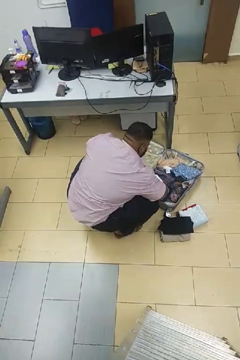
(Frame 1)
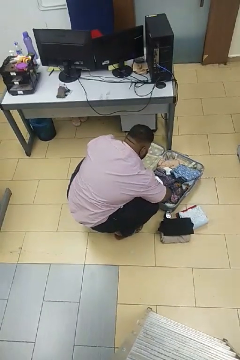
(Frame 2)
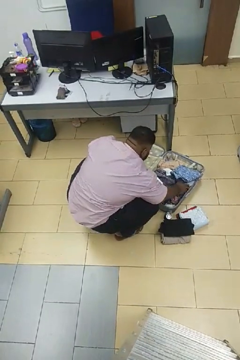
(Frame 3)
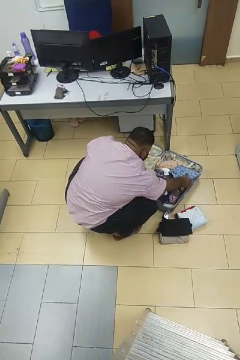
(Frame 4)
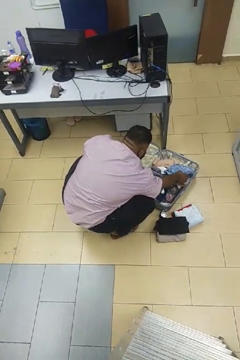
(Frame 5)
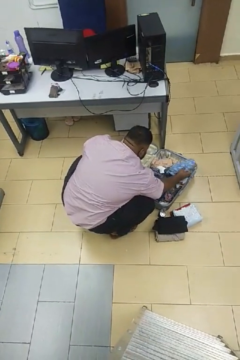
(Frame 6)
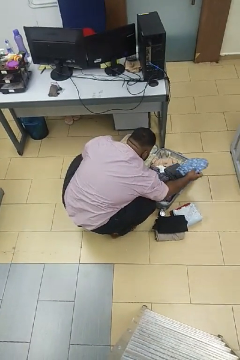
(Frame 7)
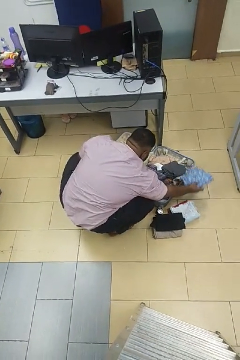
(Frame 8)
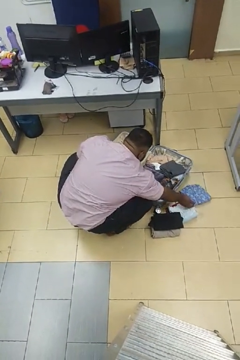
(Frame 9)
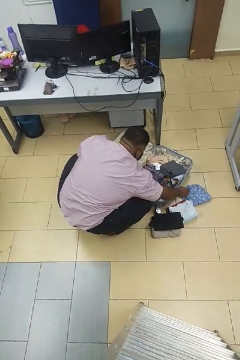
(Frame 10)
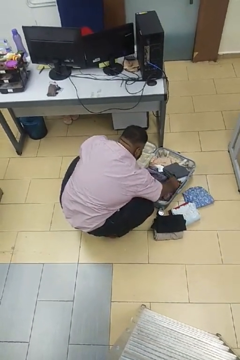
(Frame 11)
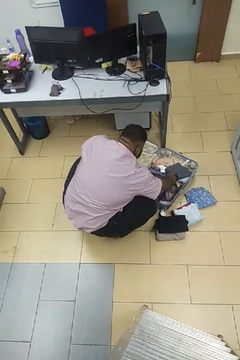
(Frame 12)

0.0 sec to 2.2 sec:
person unloads clothes from suitcase

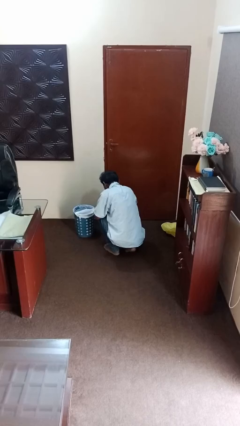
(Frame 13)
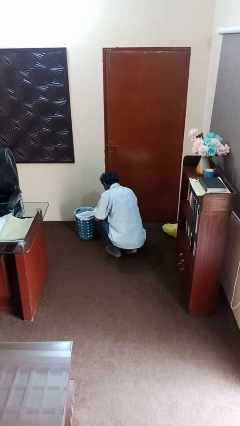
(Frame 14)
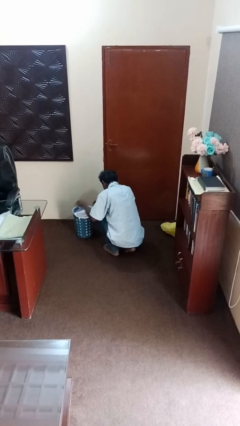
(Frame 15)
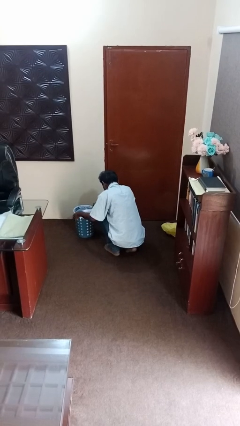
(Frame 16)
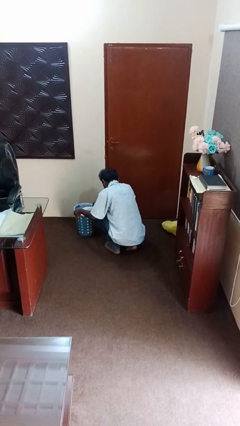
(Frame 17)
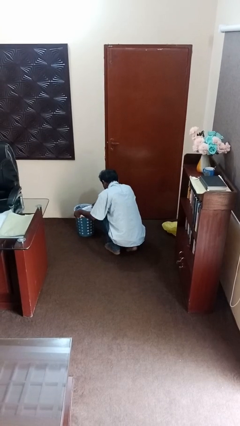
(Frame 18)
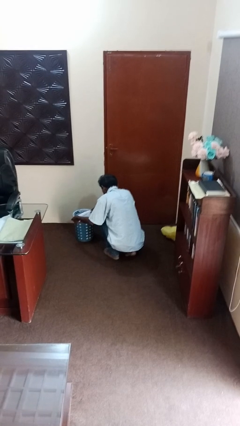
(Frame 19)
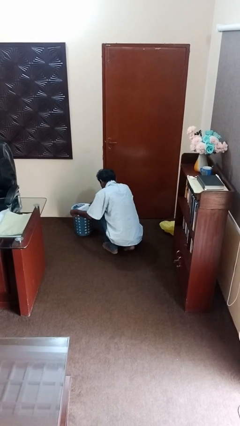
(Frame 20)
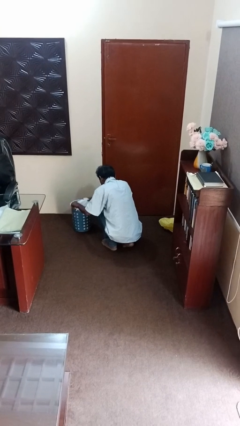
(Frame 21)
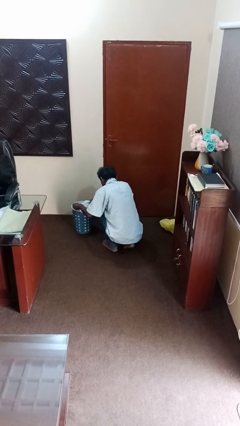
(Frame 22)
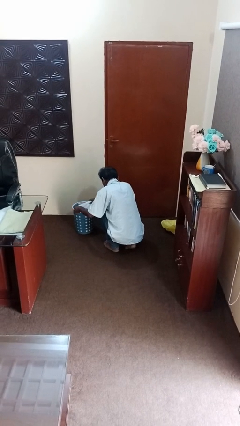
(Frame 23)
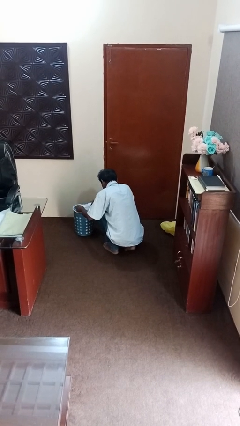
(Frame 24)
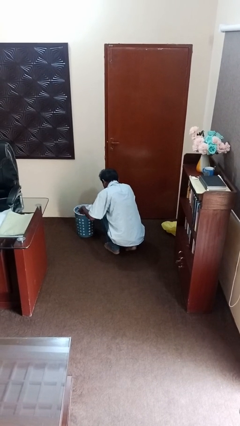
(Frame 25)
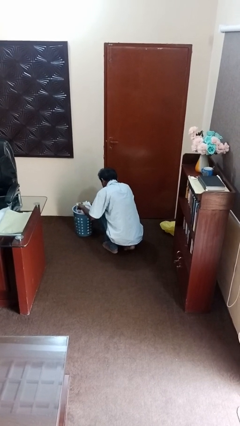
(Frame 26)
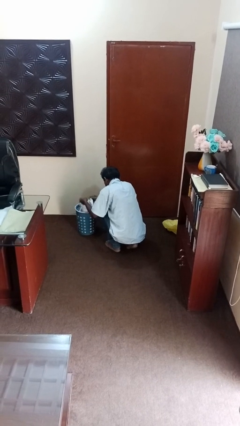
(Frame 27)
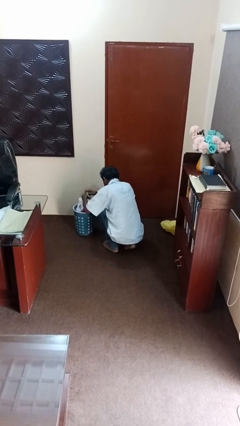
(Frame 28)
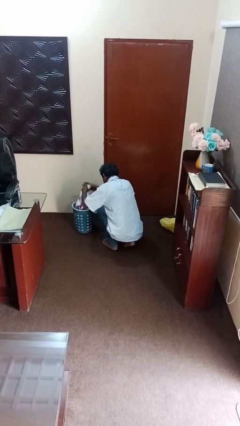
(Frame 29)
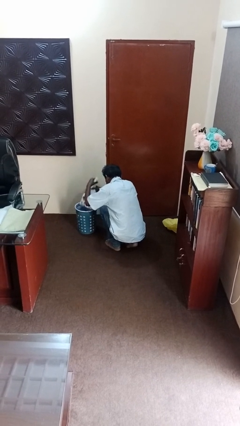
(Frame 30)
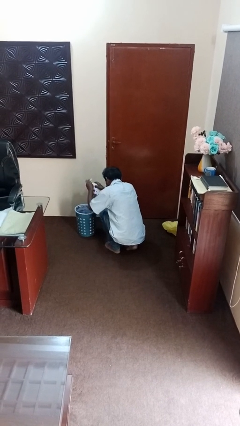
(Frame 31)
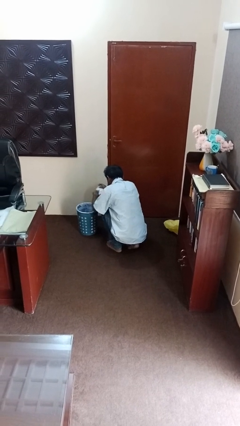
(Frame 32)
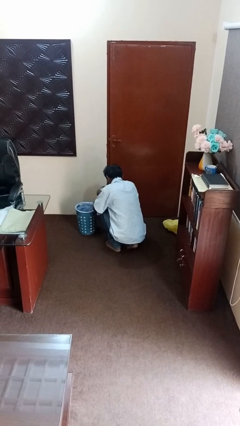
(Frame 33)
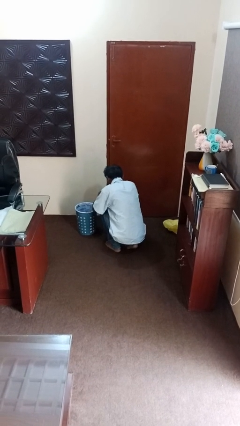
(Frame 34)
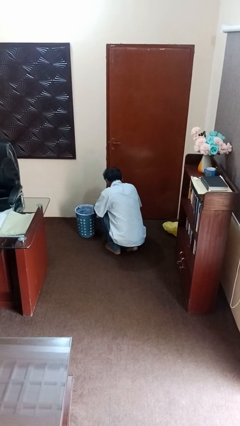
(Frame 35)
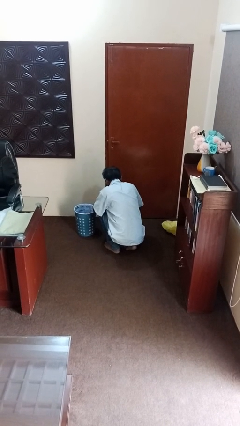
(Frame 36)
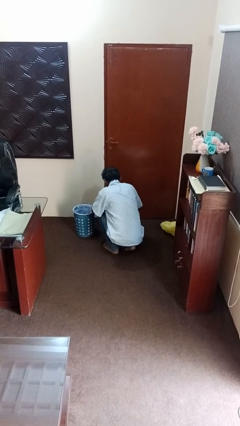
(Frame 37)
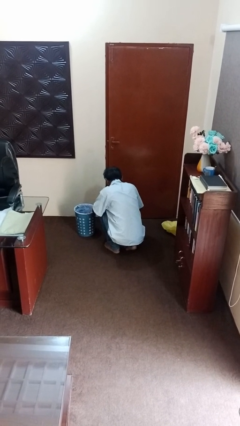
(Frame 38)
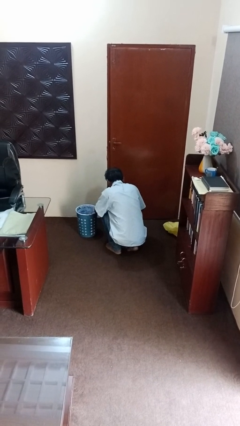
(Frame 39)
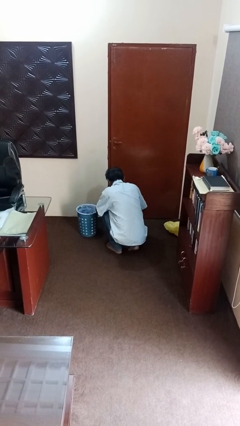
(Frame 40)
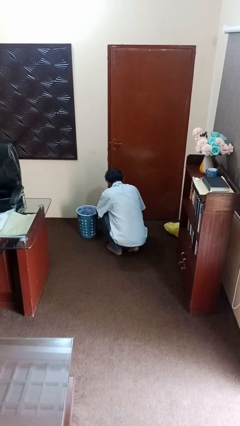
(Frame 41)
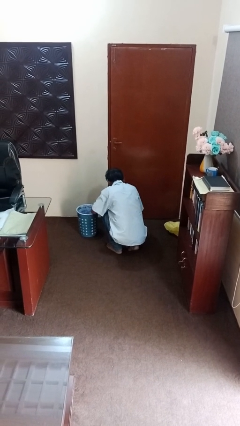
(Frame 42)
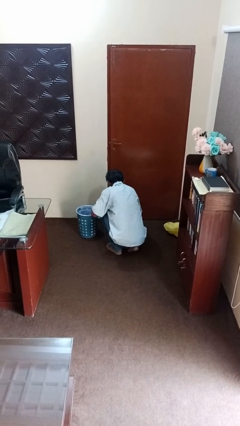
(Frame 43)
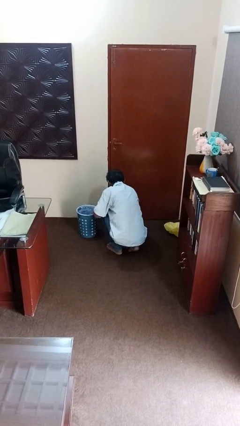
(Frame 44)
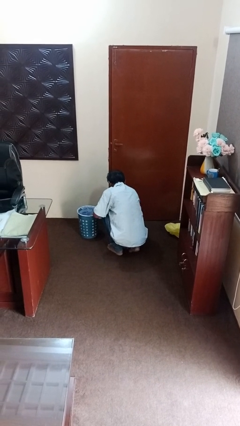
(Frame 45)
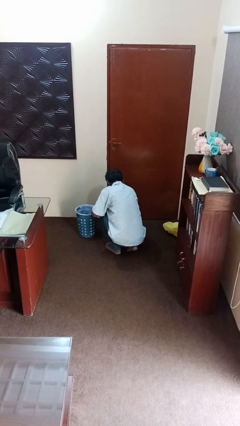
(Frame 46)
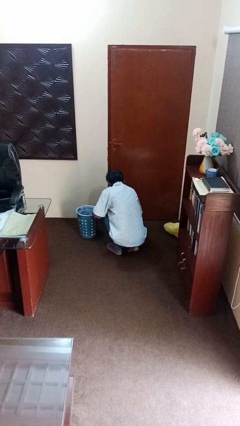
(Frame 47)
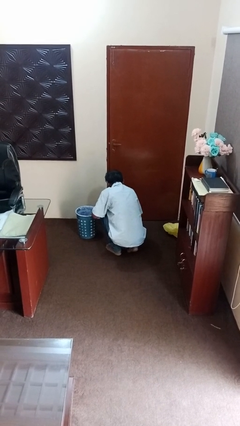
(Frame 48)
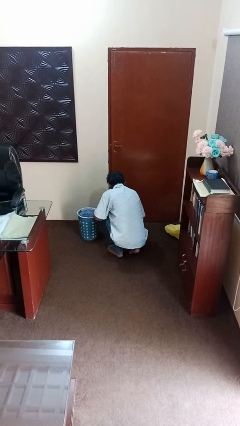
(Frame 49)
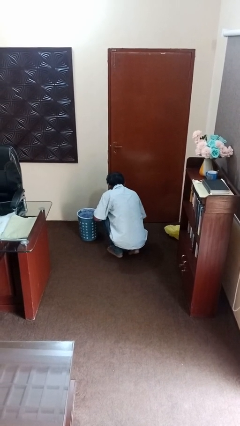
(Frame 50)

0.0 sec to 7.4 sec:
person removes trashbag from trashcan

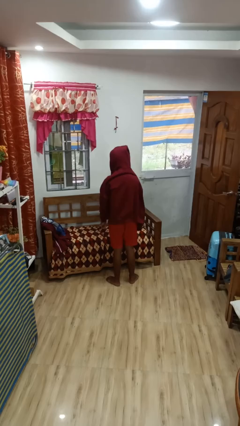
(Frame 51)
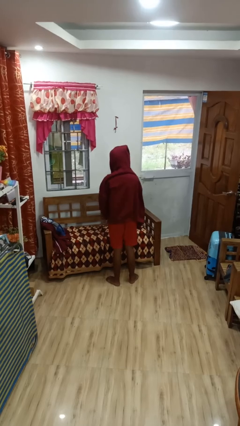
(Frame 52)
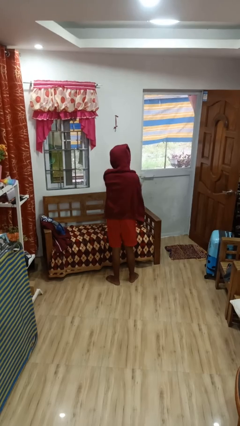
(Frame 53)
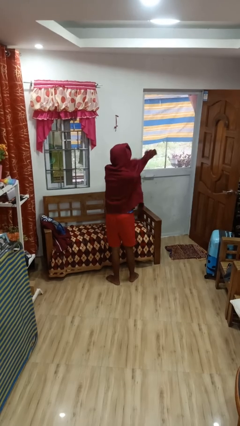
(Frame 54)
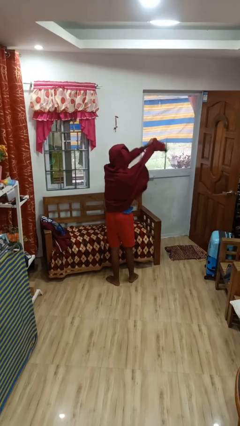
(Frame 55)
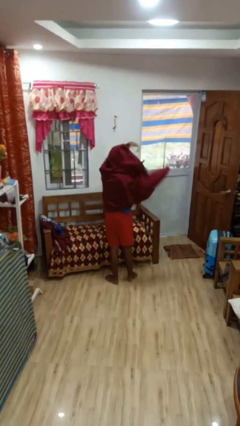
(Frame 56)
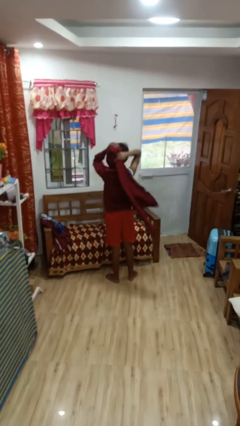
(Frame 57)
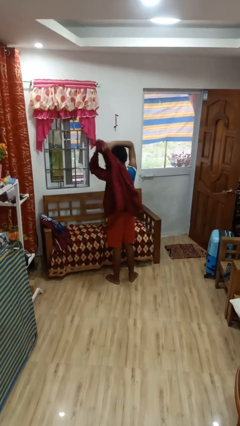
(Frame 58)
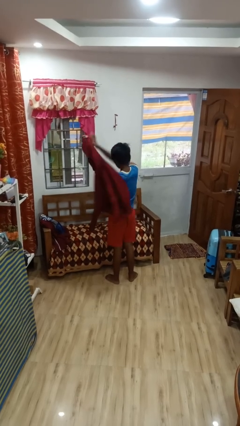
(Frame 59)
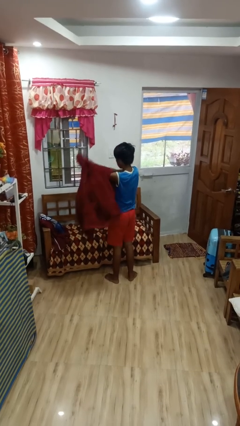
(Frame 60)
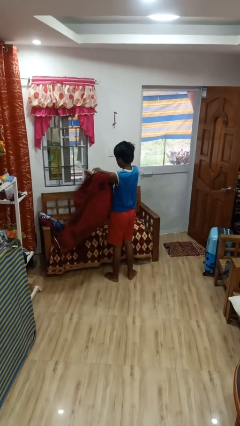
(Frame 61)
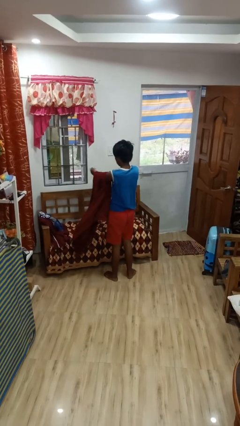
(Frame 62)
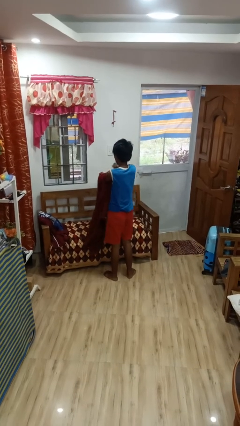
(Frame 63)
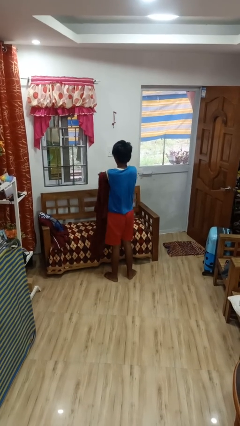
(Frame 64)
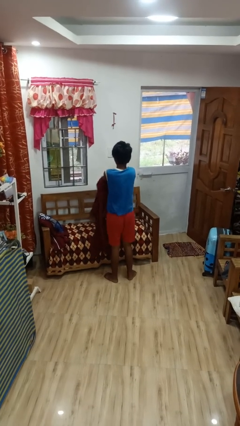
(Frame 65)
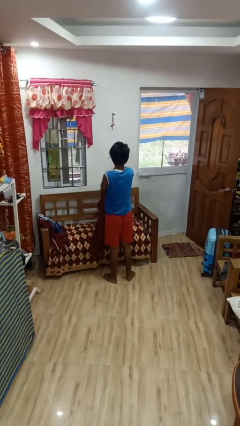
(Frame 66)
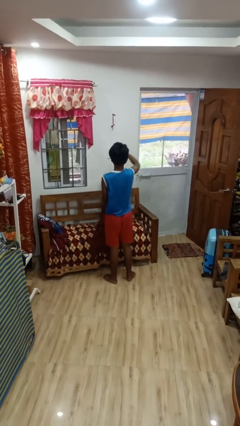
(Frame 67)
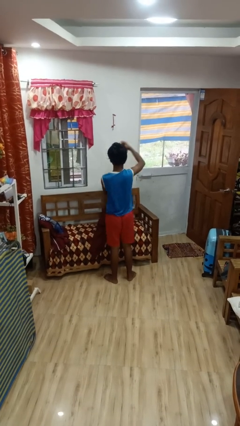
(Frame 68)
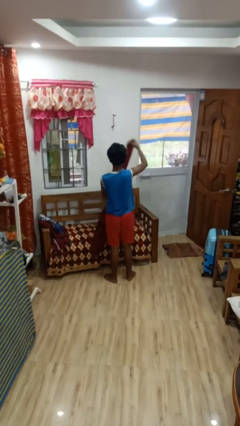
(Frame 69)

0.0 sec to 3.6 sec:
person takes off hoodie

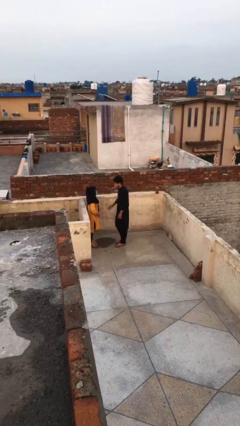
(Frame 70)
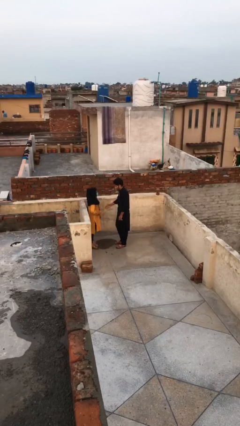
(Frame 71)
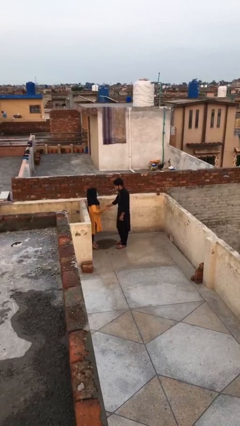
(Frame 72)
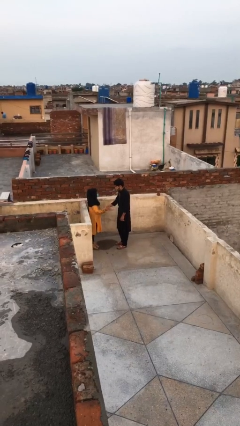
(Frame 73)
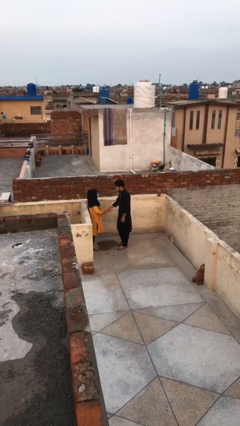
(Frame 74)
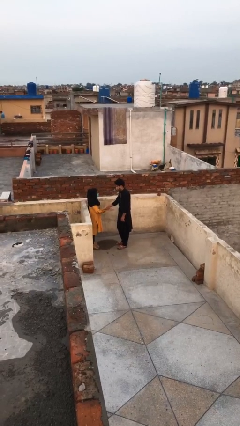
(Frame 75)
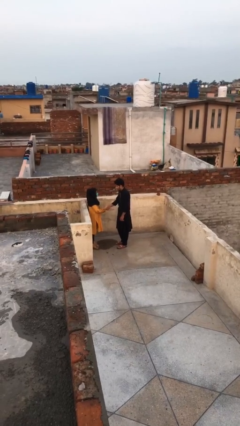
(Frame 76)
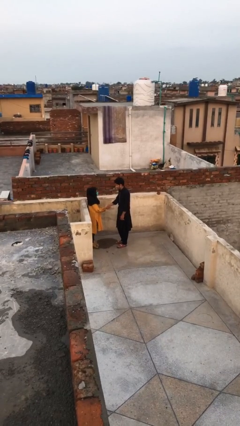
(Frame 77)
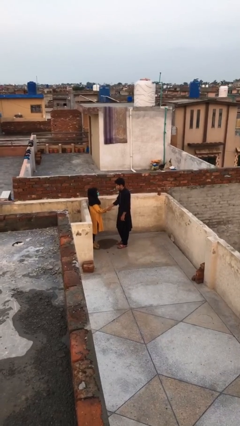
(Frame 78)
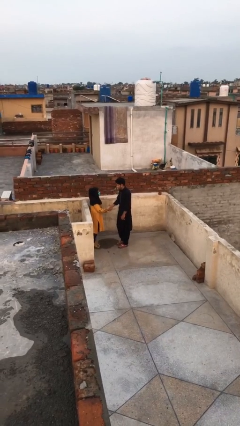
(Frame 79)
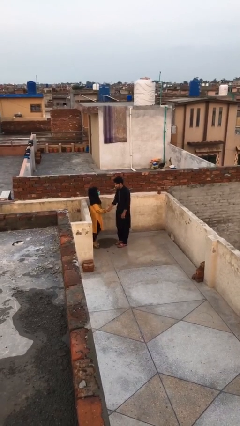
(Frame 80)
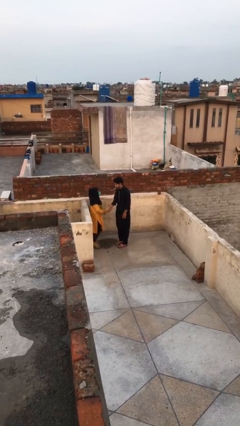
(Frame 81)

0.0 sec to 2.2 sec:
person shakes hand

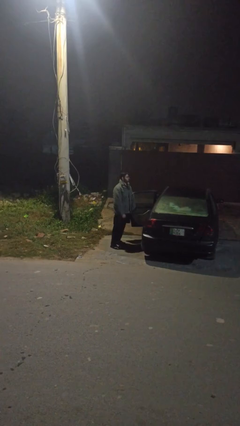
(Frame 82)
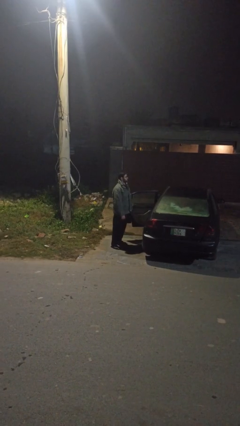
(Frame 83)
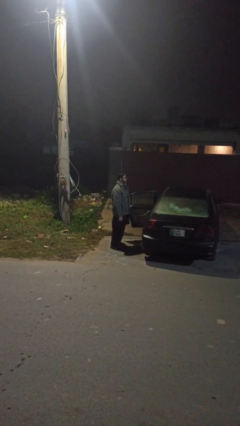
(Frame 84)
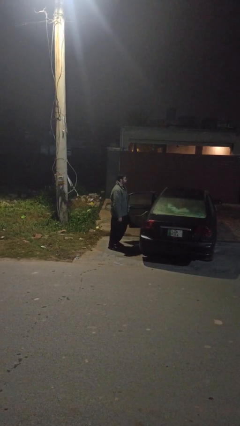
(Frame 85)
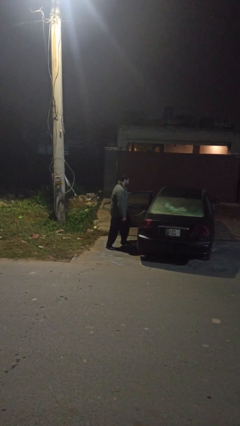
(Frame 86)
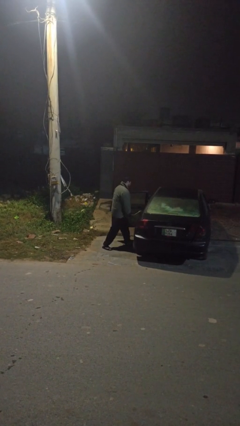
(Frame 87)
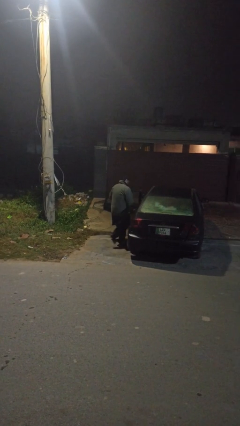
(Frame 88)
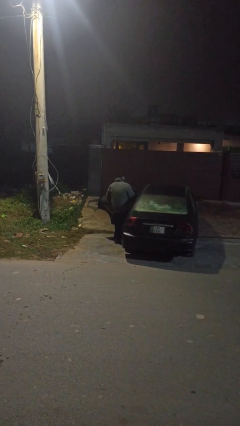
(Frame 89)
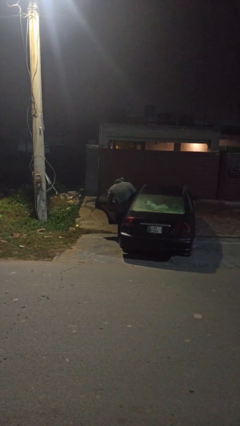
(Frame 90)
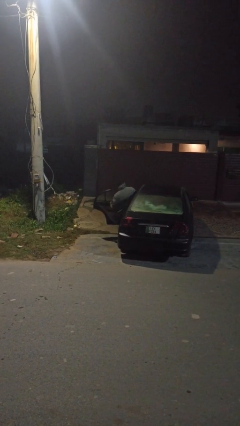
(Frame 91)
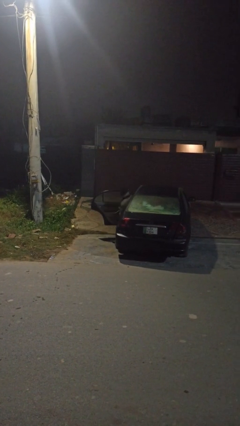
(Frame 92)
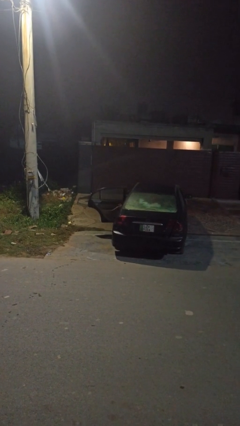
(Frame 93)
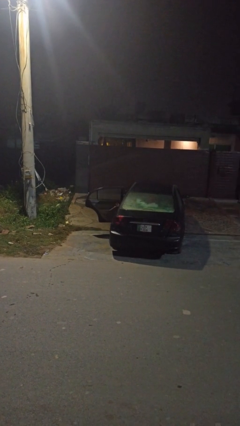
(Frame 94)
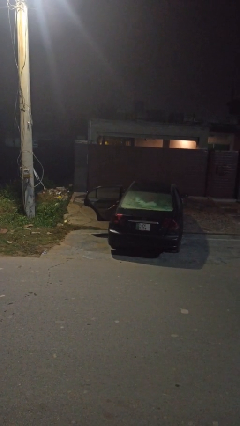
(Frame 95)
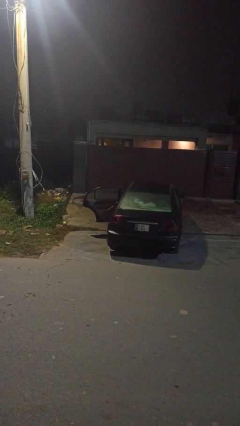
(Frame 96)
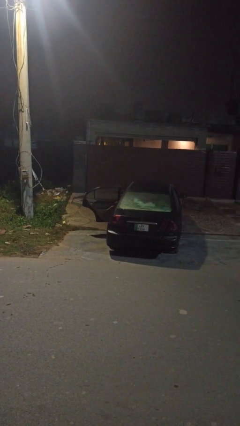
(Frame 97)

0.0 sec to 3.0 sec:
person enters car
